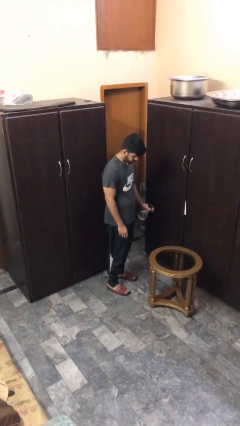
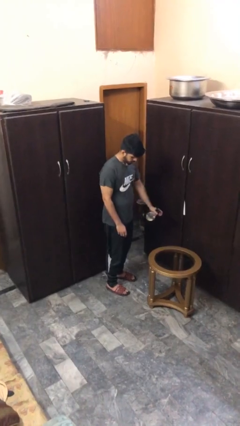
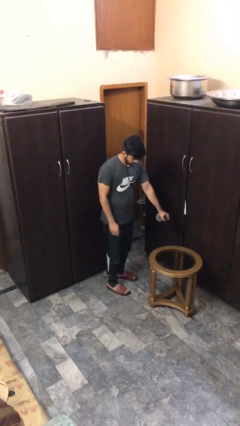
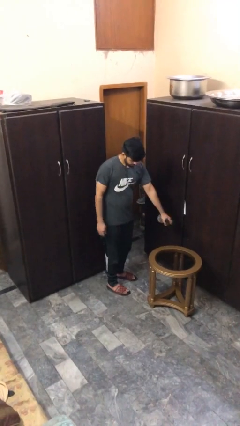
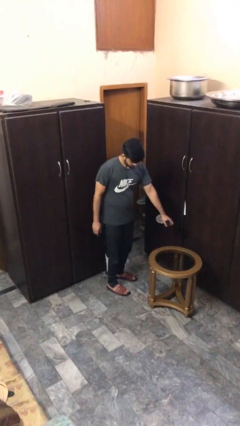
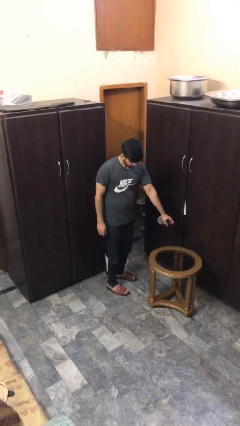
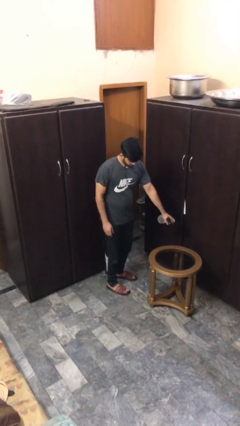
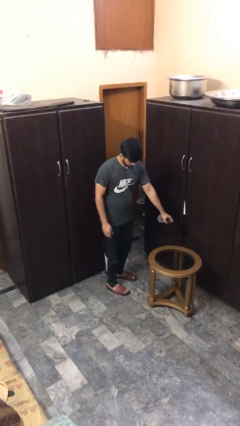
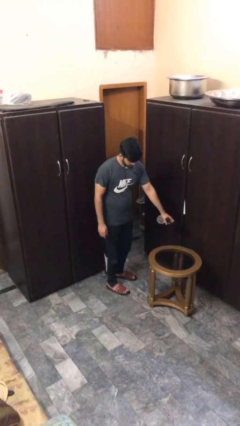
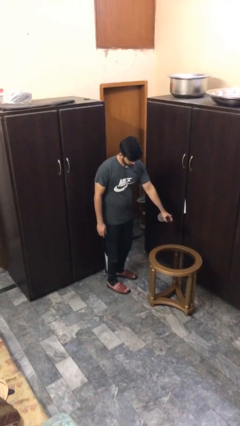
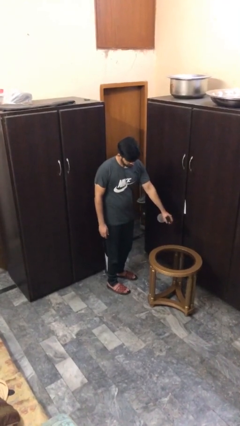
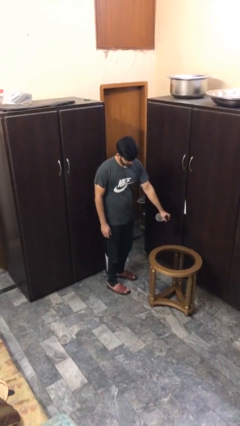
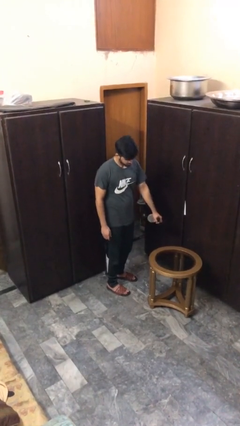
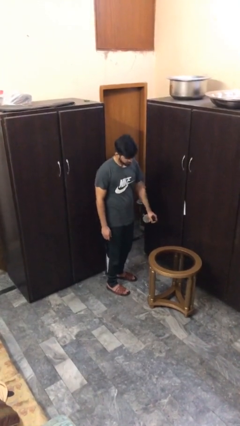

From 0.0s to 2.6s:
person sprays from bottle

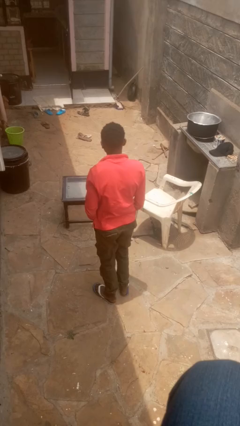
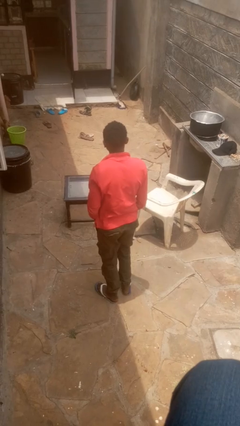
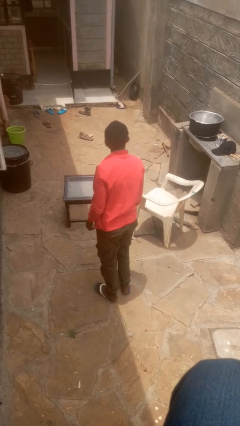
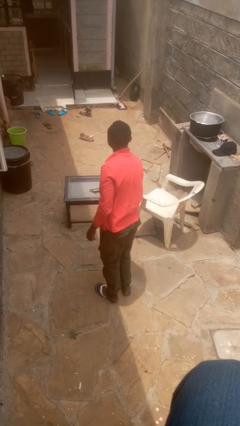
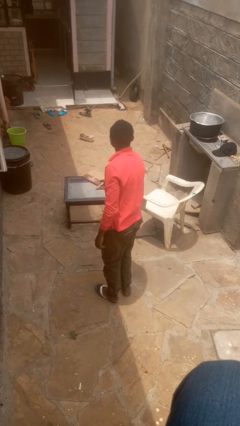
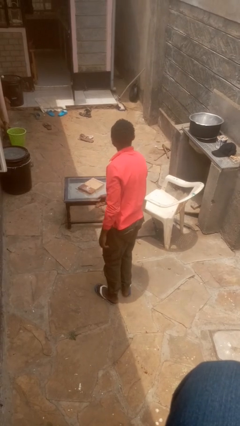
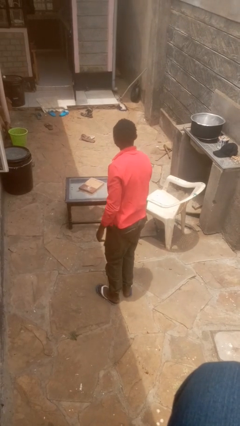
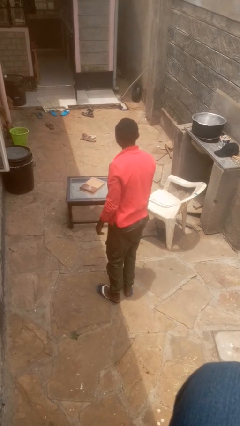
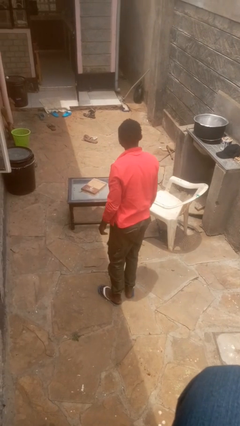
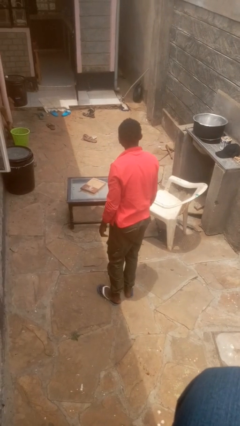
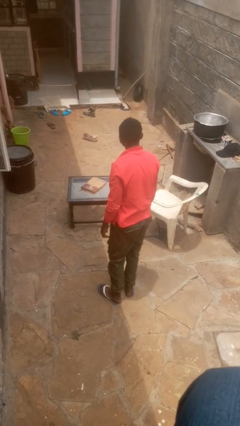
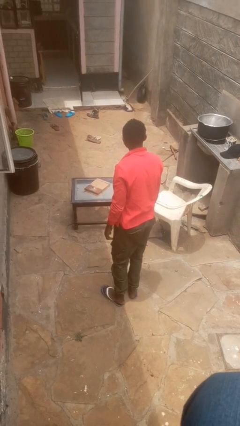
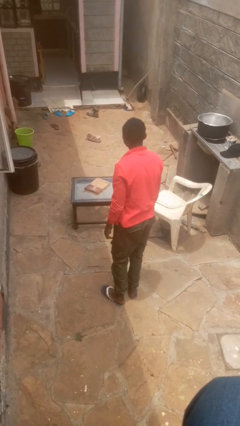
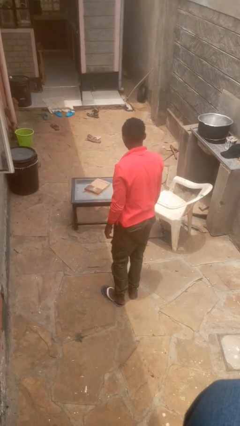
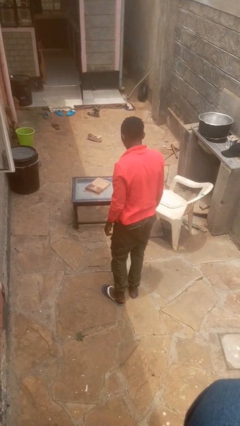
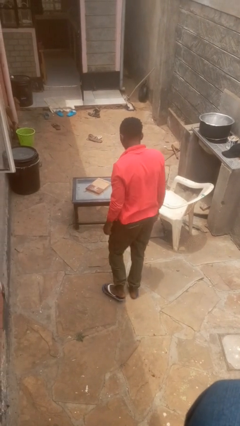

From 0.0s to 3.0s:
person throws object on table

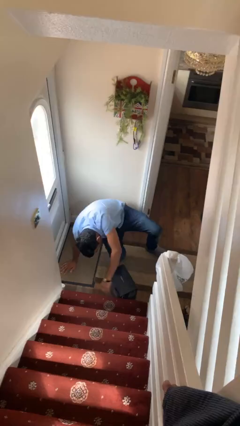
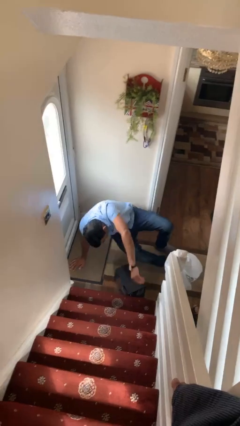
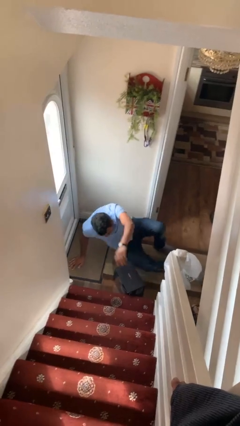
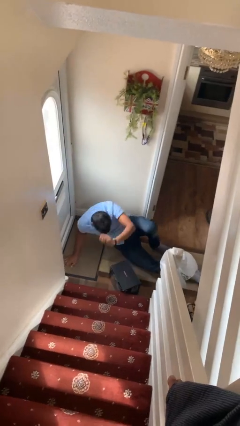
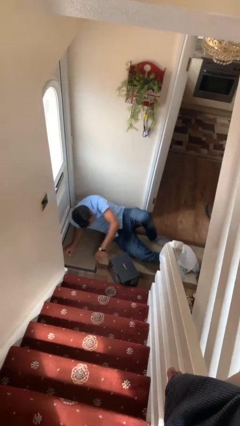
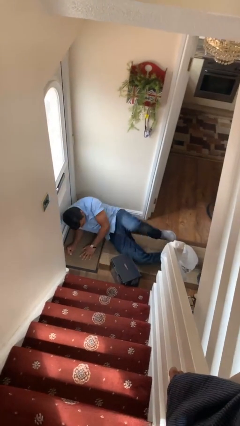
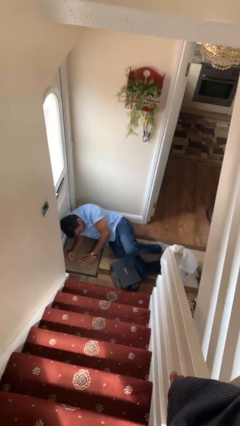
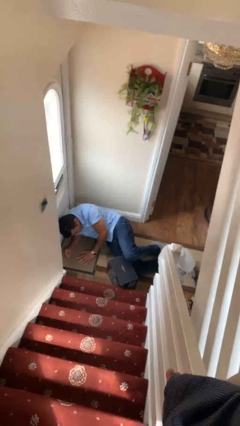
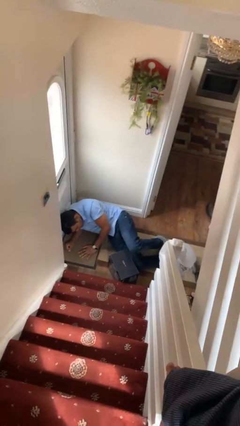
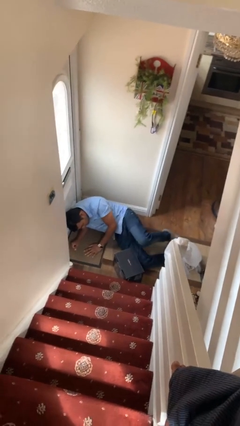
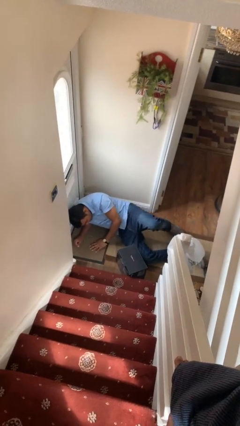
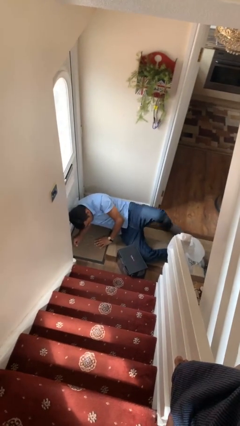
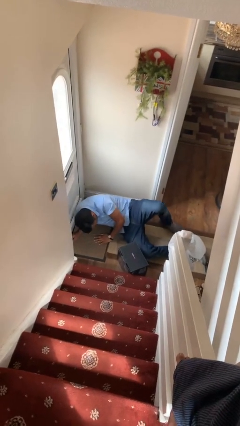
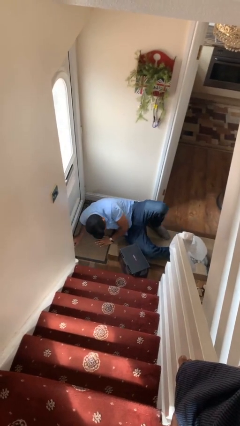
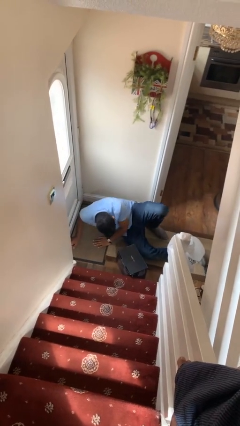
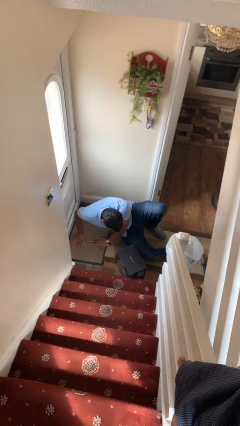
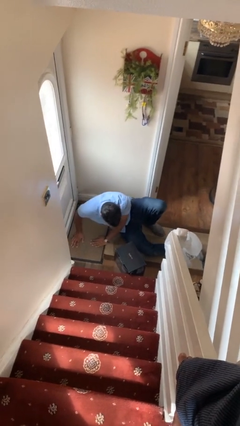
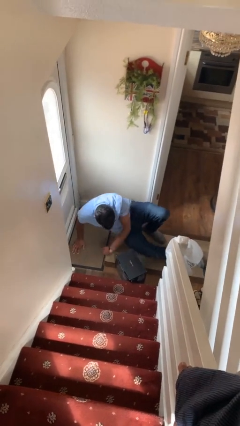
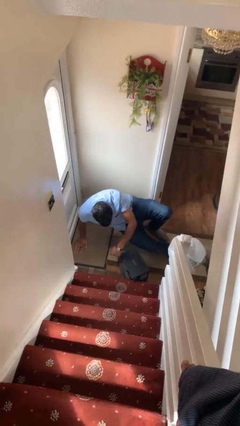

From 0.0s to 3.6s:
person lies down on floor

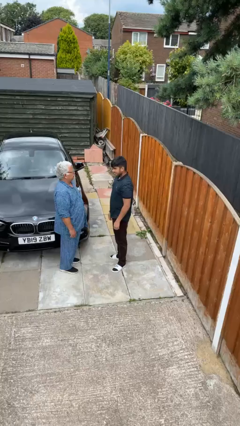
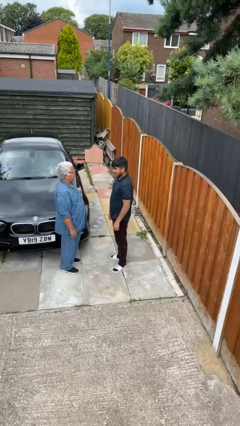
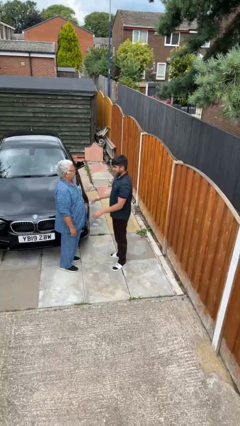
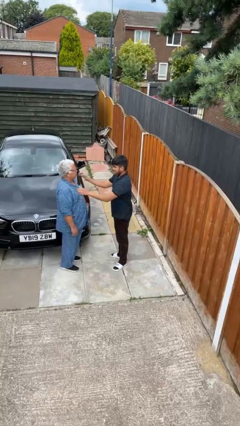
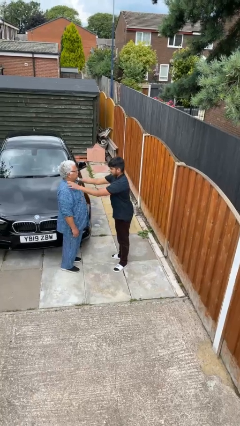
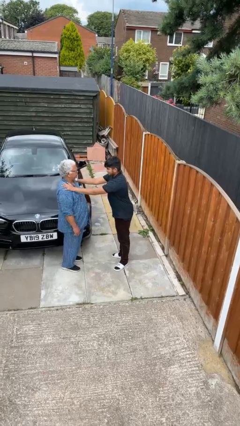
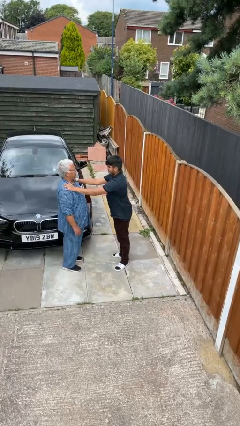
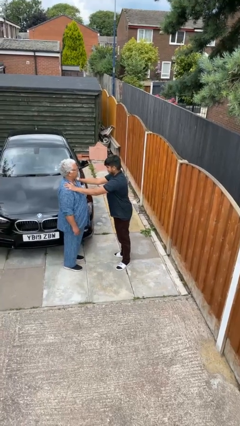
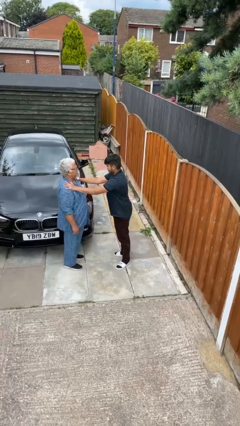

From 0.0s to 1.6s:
person pounds shoulders of person

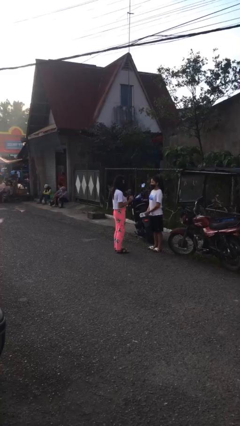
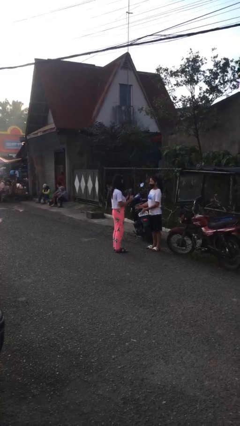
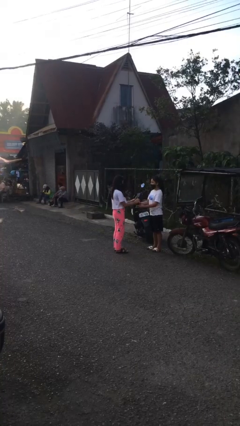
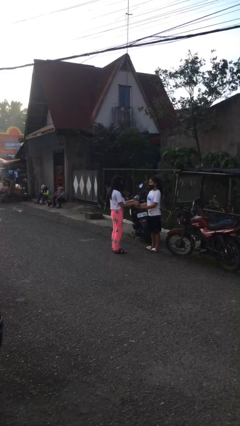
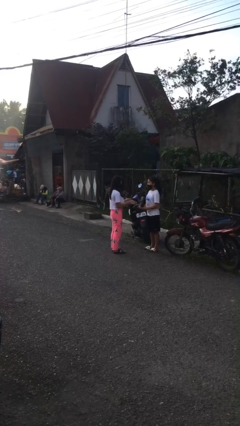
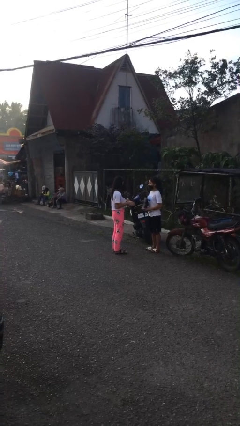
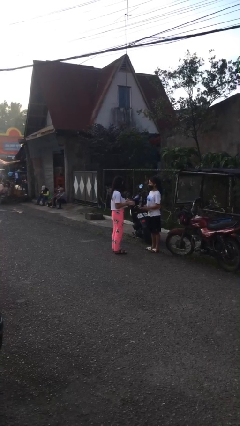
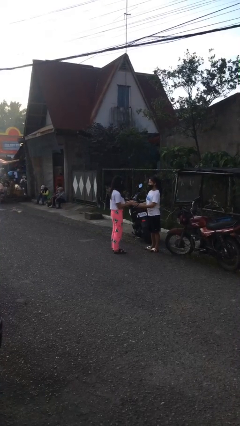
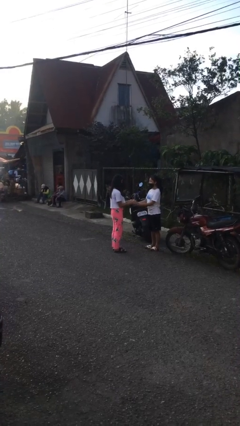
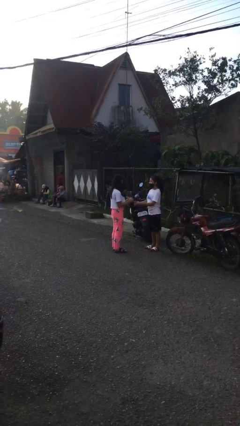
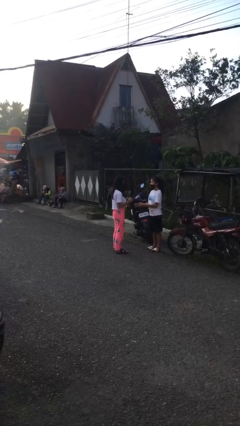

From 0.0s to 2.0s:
person transfers object to person

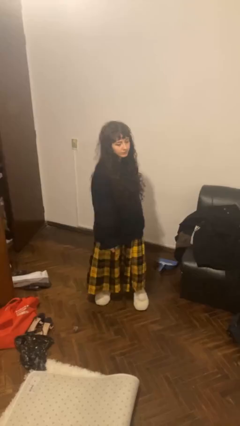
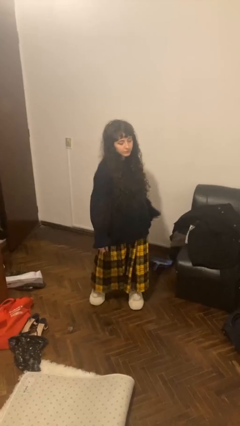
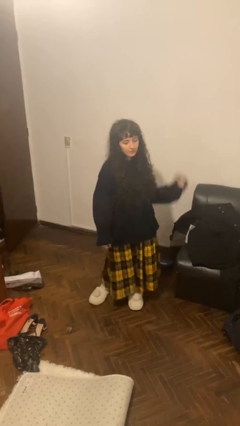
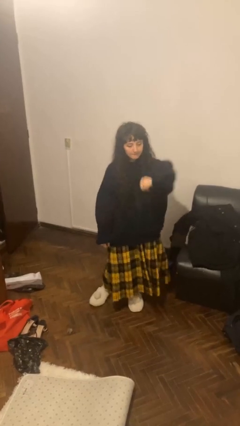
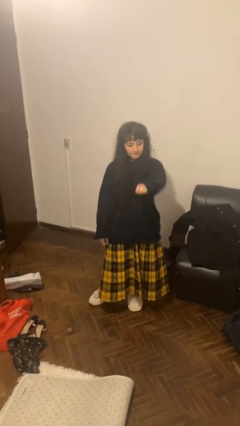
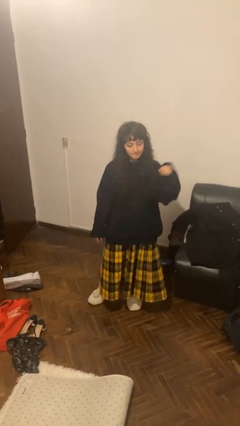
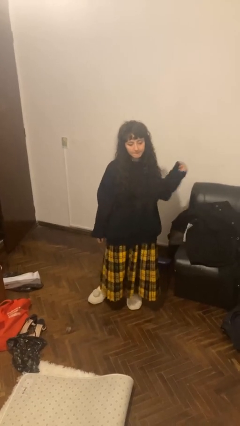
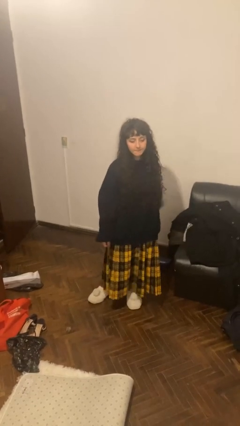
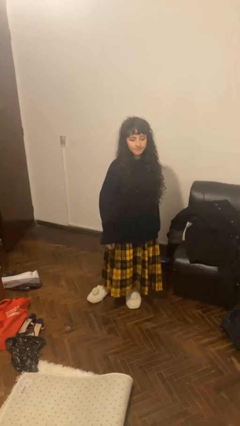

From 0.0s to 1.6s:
person punches

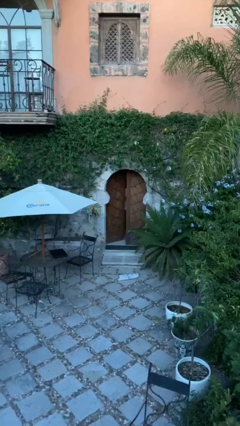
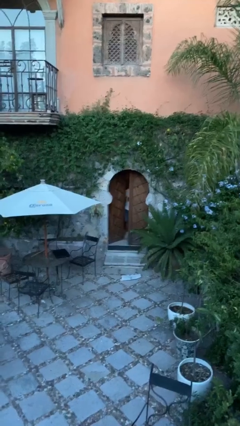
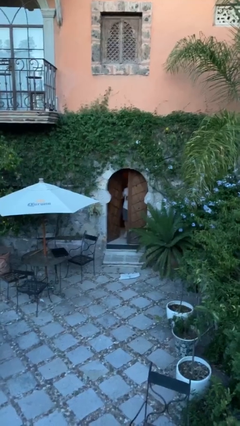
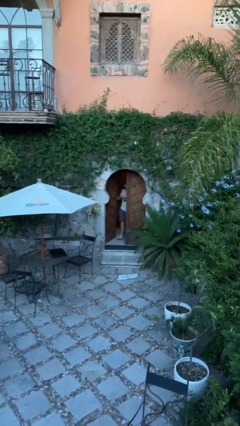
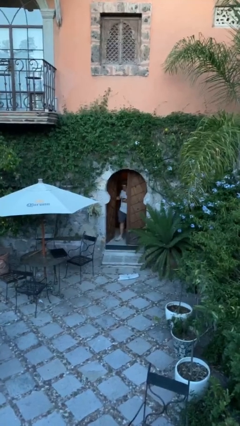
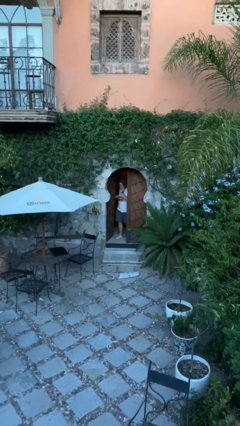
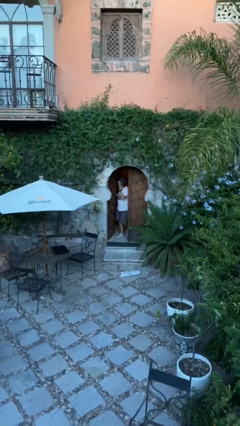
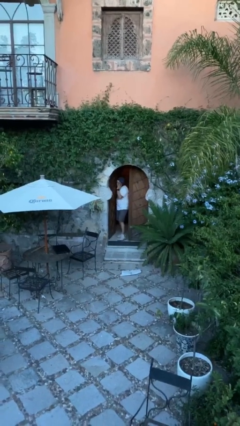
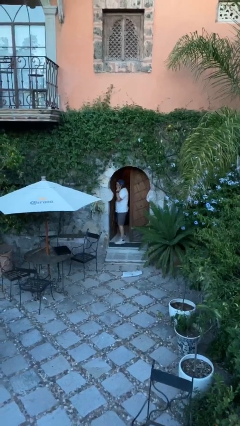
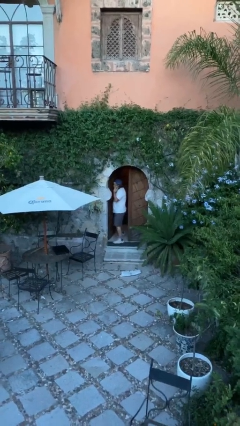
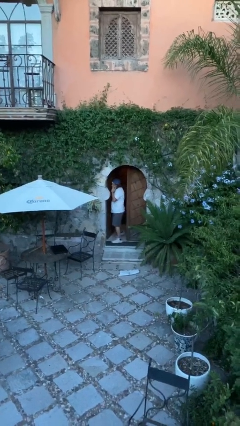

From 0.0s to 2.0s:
person opens facility door

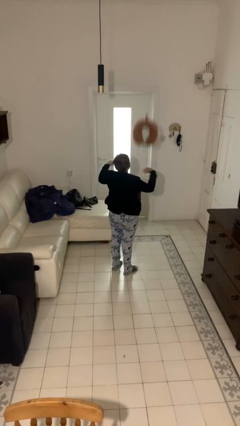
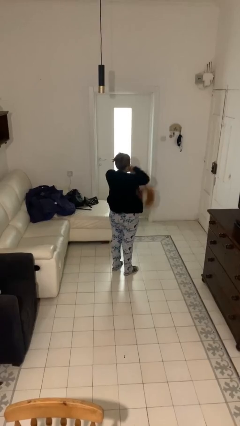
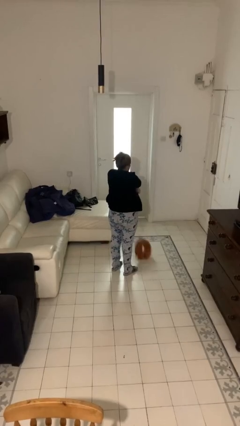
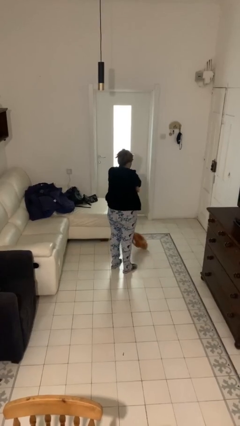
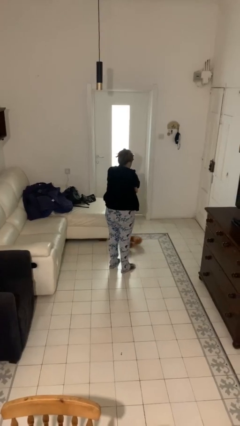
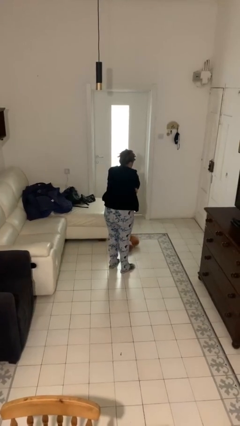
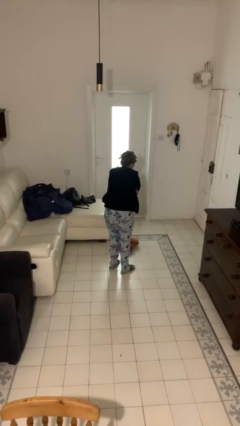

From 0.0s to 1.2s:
person catches dropped object
